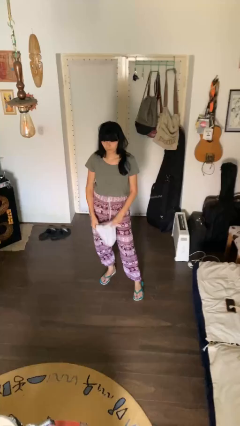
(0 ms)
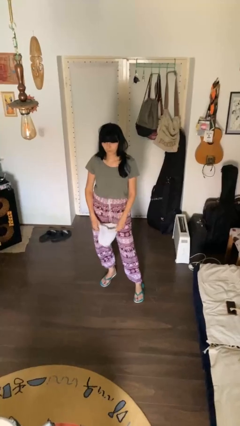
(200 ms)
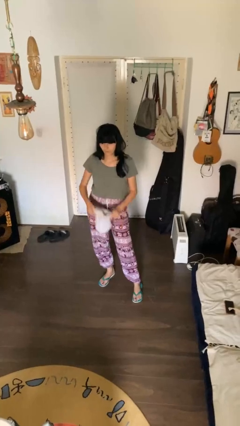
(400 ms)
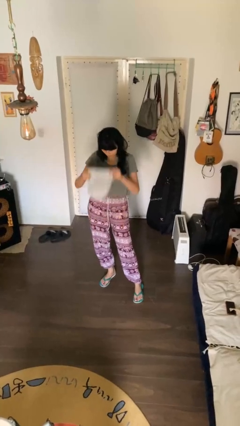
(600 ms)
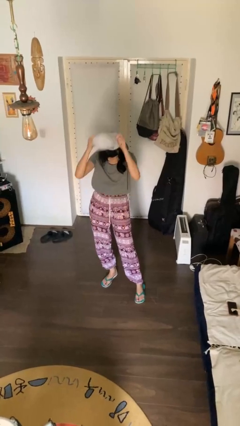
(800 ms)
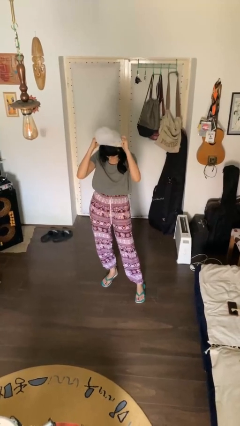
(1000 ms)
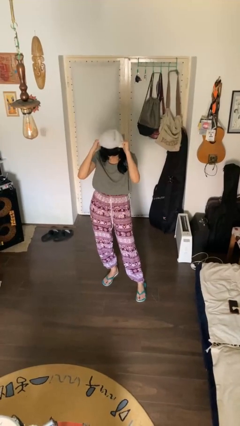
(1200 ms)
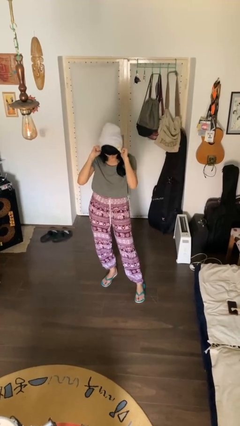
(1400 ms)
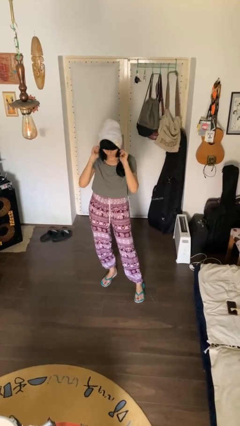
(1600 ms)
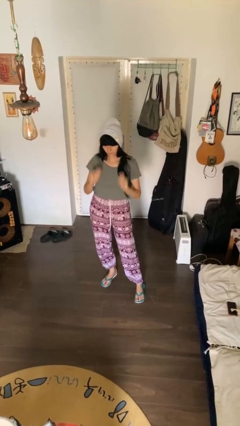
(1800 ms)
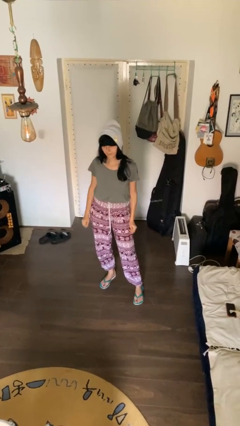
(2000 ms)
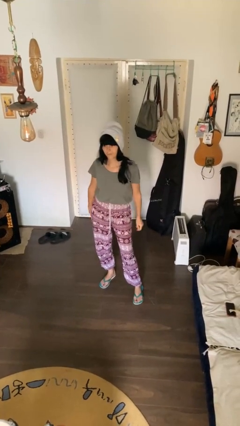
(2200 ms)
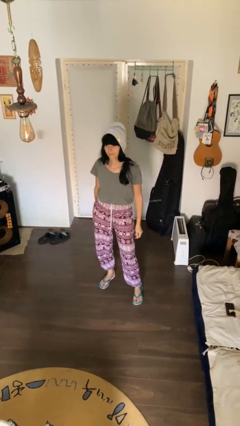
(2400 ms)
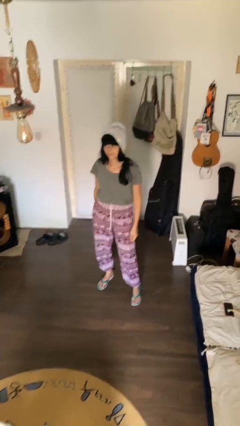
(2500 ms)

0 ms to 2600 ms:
person puts on hat

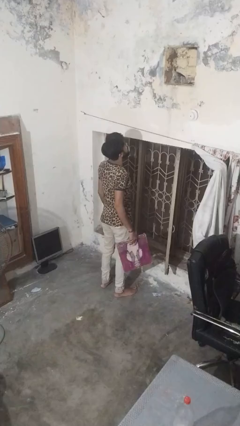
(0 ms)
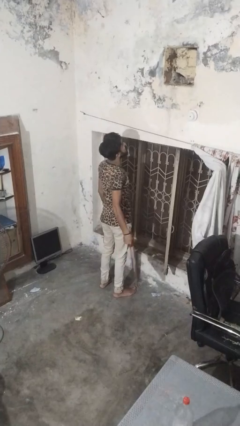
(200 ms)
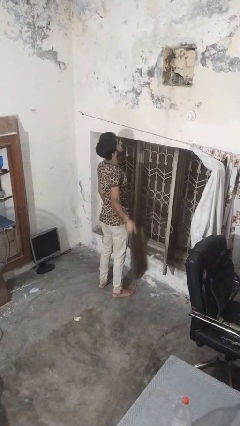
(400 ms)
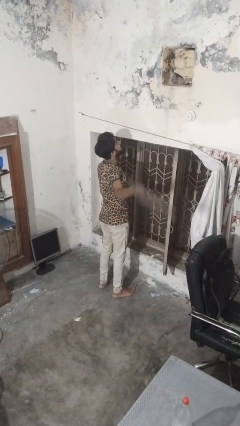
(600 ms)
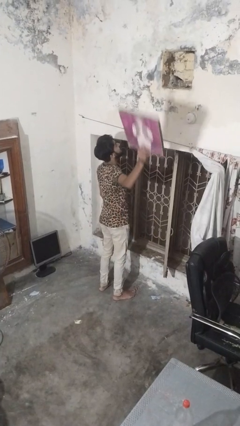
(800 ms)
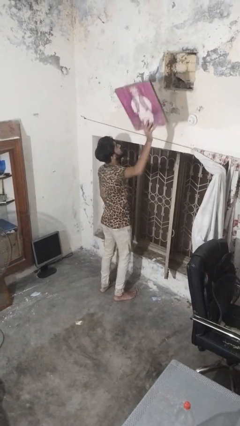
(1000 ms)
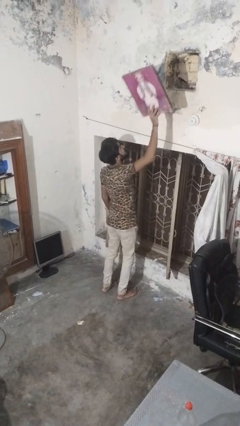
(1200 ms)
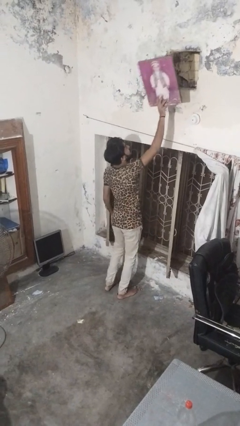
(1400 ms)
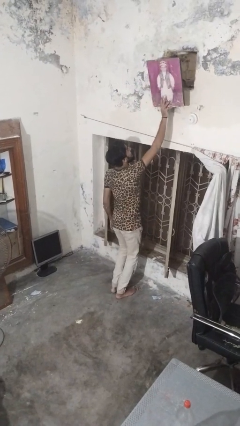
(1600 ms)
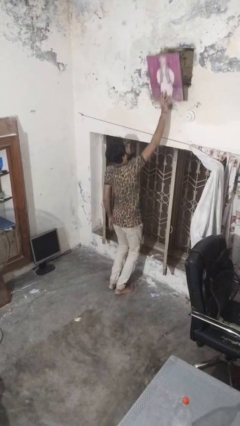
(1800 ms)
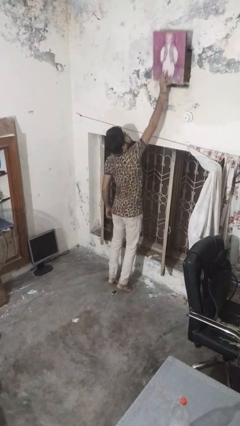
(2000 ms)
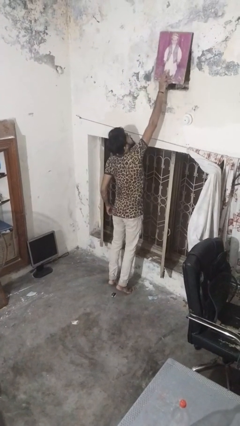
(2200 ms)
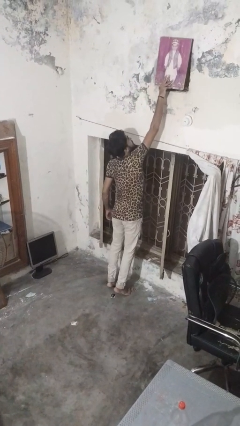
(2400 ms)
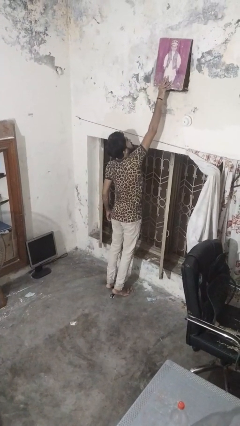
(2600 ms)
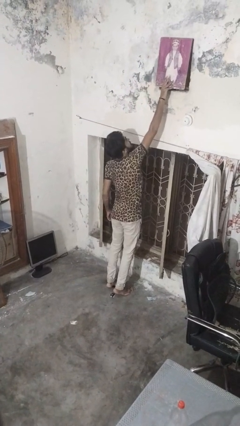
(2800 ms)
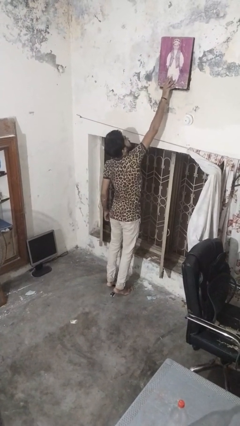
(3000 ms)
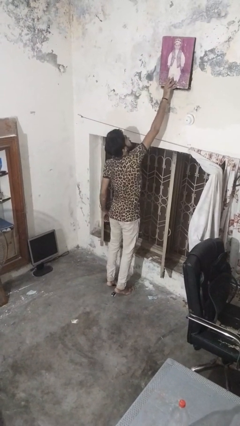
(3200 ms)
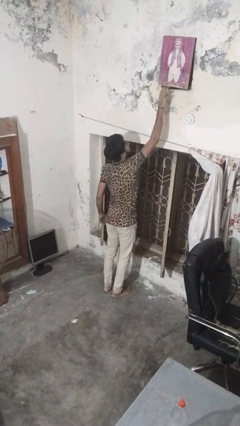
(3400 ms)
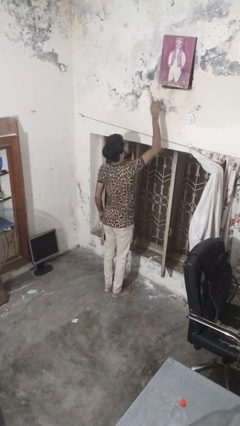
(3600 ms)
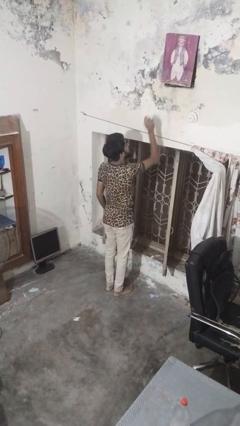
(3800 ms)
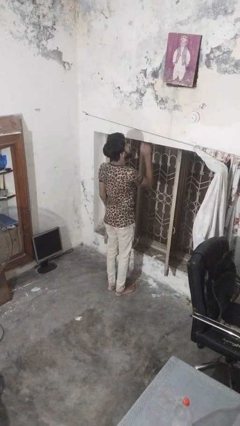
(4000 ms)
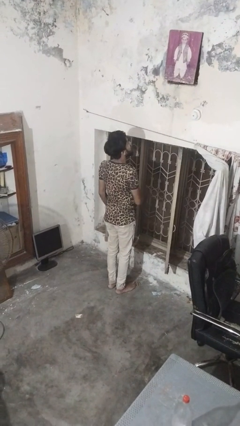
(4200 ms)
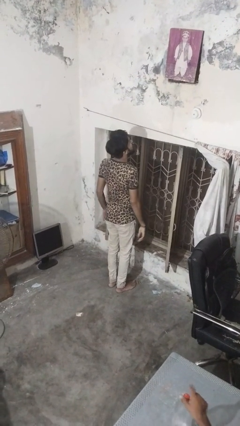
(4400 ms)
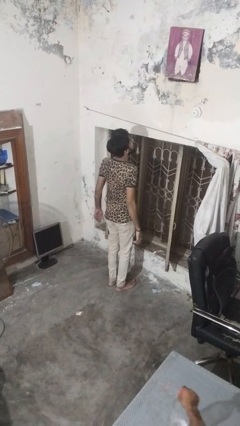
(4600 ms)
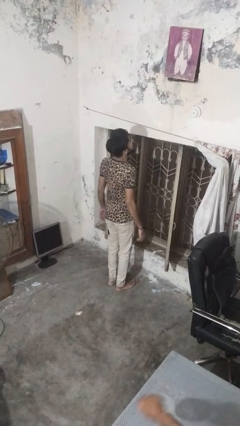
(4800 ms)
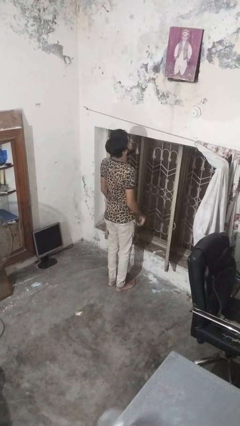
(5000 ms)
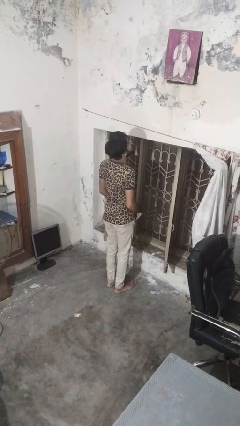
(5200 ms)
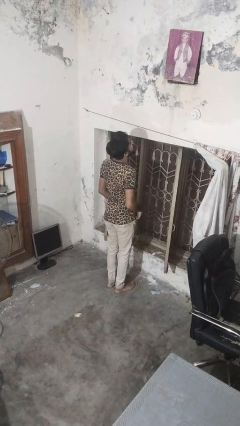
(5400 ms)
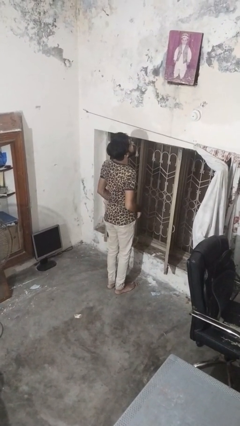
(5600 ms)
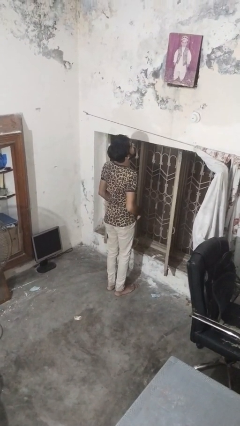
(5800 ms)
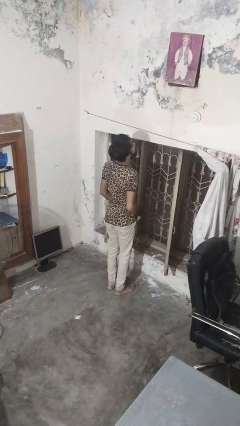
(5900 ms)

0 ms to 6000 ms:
person puts up picture frame

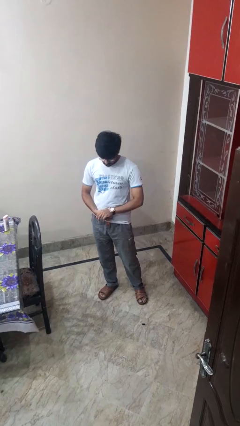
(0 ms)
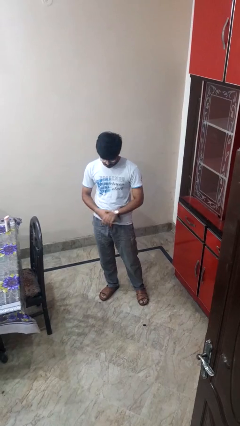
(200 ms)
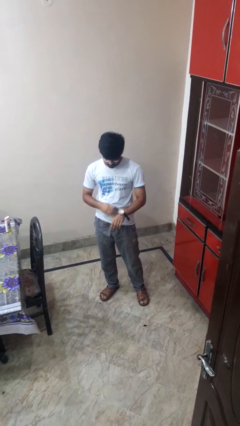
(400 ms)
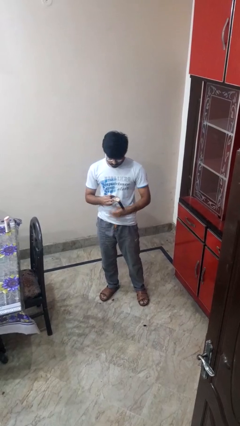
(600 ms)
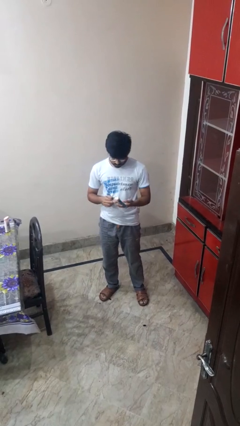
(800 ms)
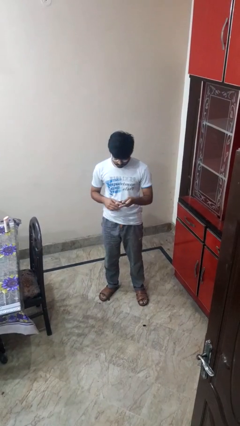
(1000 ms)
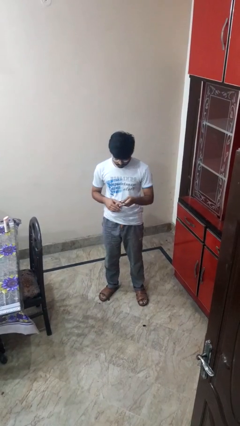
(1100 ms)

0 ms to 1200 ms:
person takes off wristwatch

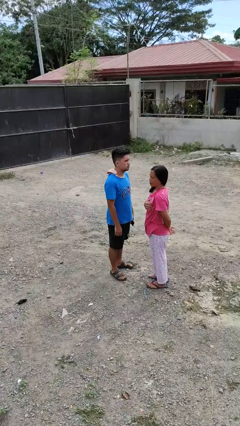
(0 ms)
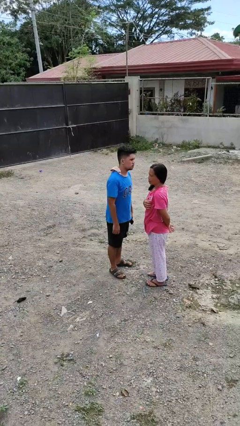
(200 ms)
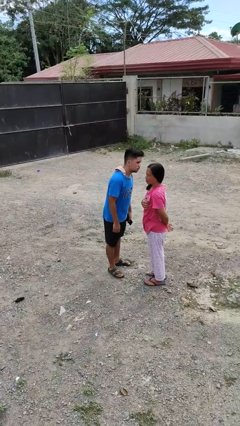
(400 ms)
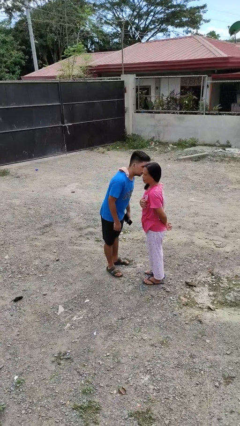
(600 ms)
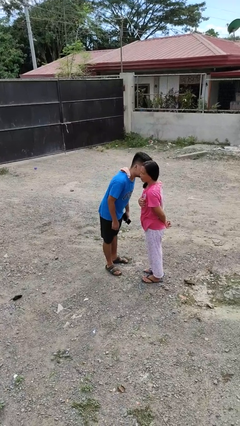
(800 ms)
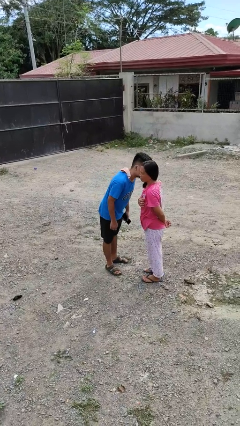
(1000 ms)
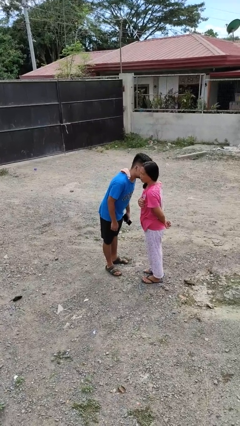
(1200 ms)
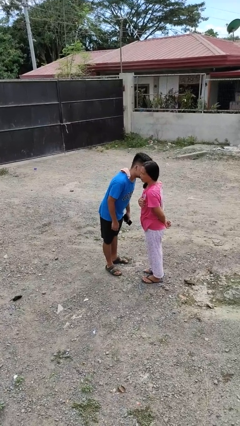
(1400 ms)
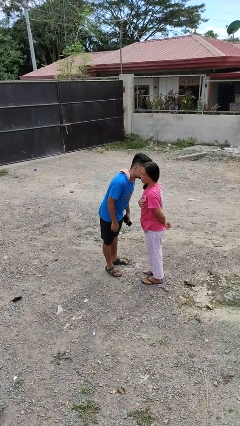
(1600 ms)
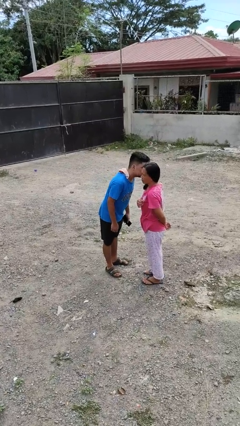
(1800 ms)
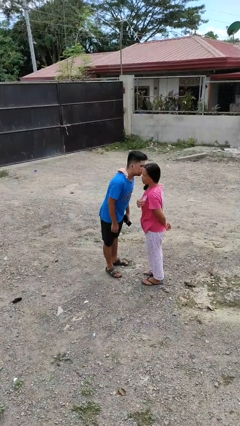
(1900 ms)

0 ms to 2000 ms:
person kisses cheek of person

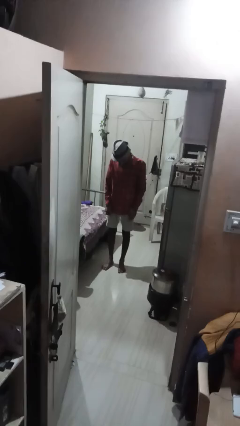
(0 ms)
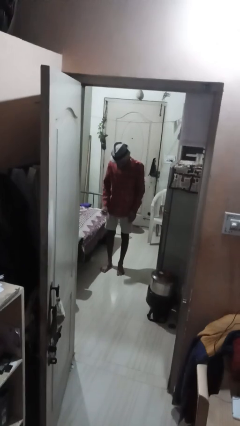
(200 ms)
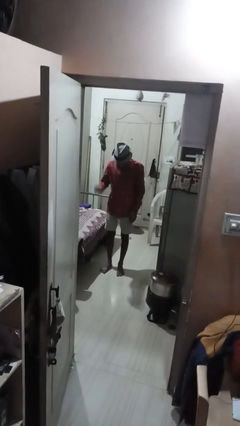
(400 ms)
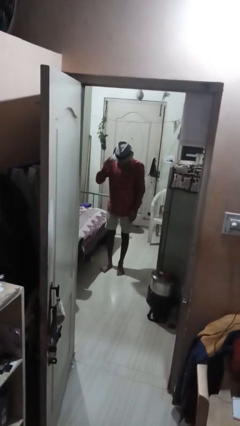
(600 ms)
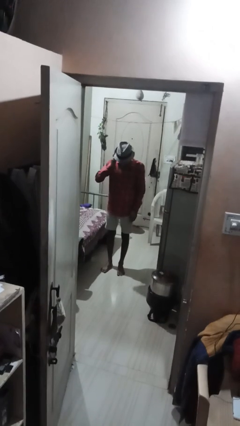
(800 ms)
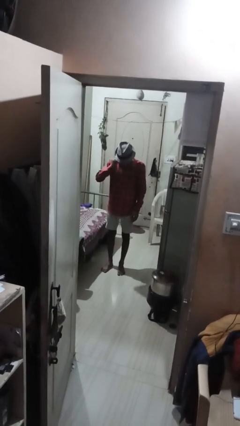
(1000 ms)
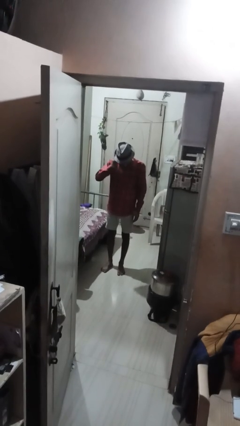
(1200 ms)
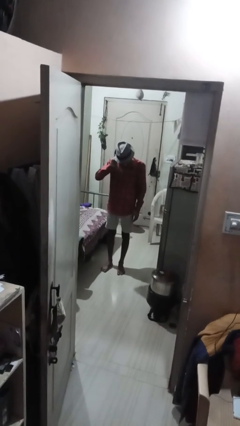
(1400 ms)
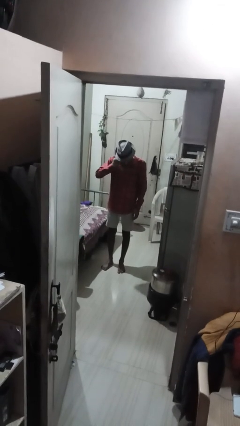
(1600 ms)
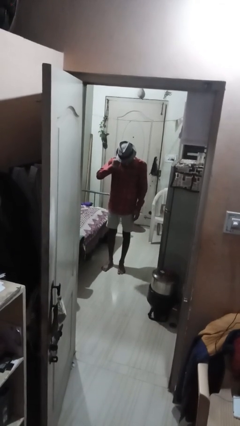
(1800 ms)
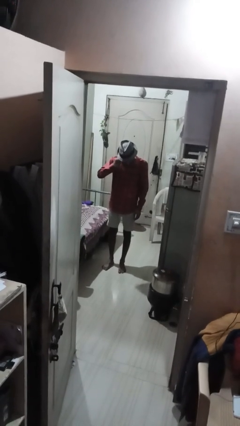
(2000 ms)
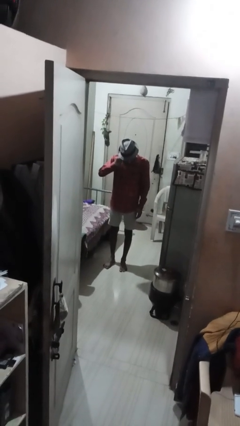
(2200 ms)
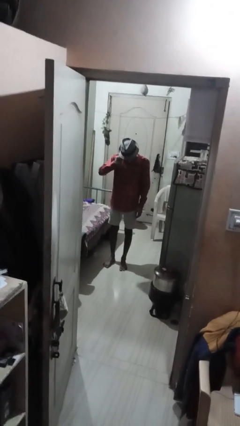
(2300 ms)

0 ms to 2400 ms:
person touches earlobe

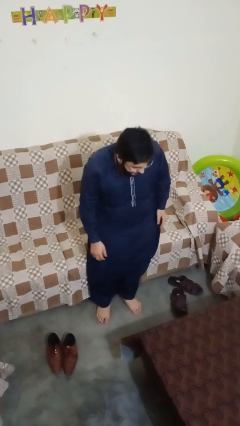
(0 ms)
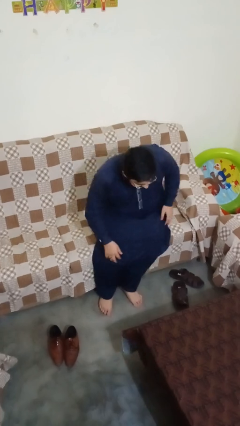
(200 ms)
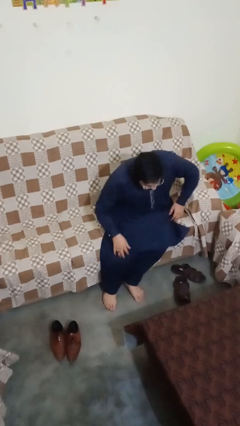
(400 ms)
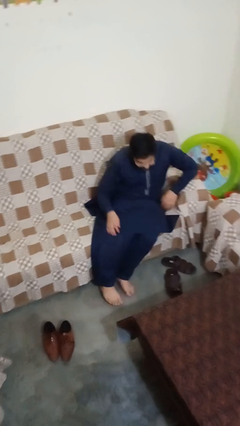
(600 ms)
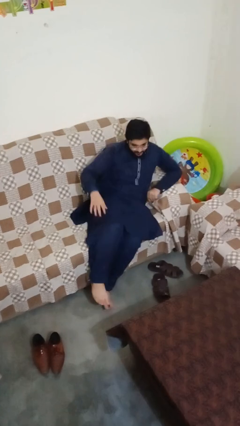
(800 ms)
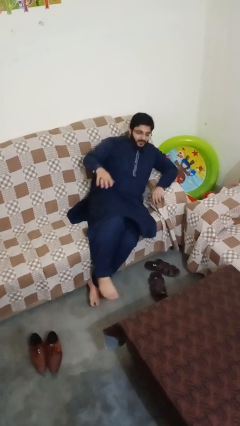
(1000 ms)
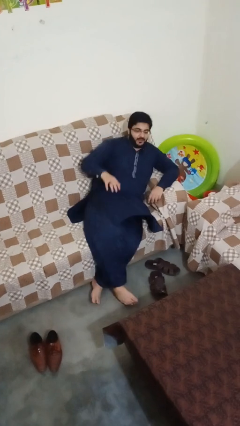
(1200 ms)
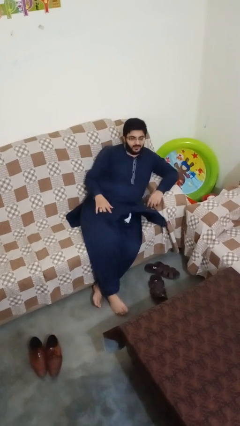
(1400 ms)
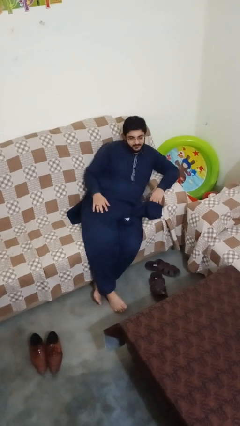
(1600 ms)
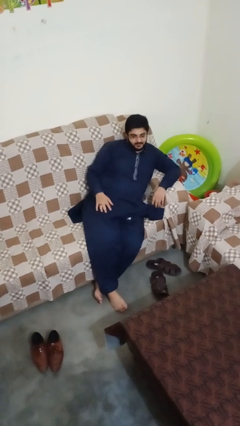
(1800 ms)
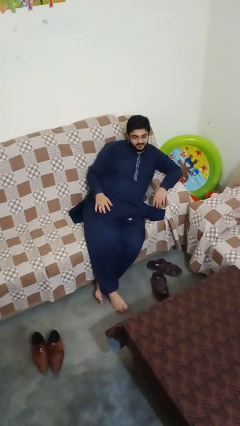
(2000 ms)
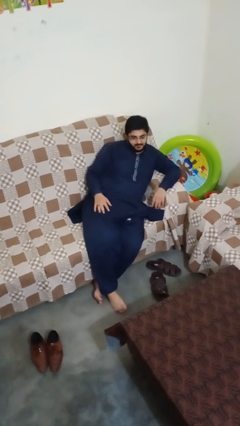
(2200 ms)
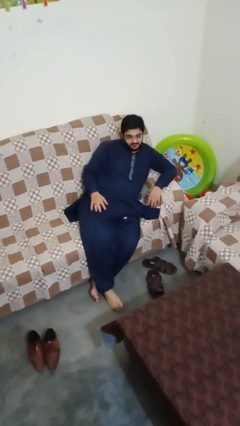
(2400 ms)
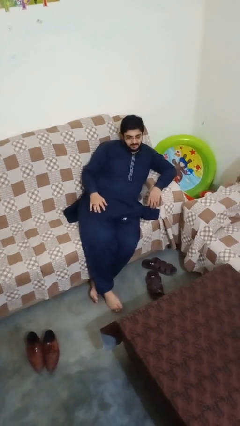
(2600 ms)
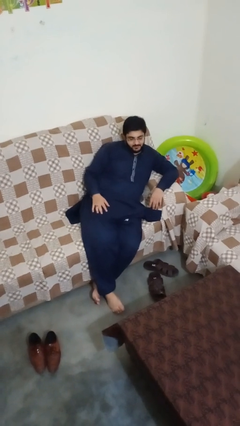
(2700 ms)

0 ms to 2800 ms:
person lies down on couch

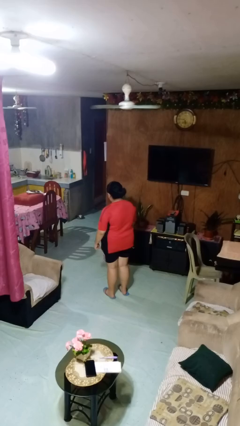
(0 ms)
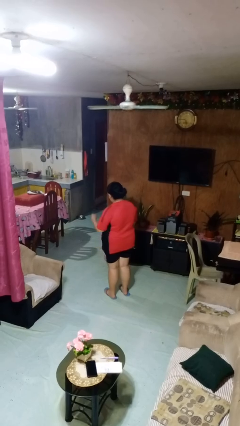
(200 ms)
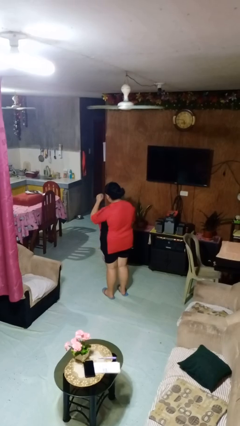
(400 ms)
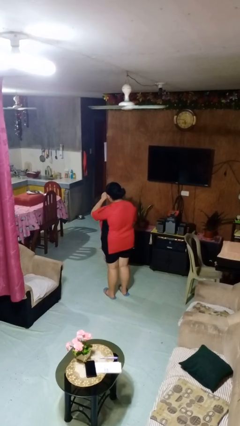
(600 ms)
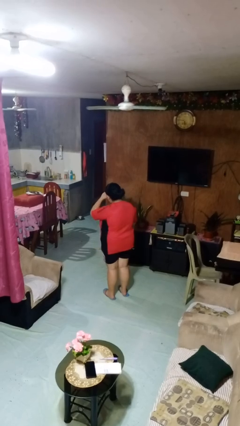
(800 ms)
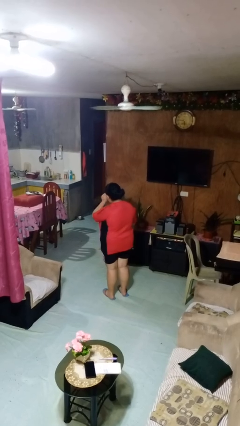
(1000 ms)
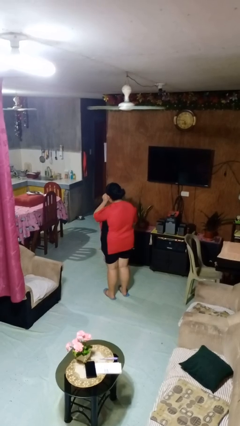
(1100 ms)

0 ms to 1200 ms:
person rubs eyes
